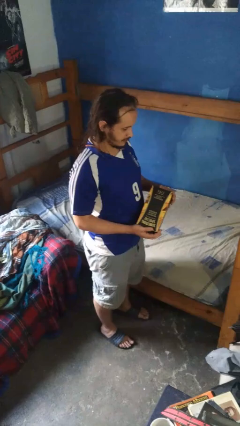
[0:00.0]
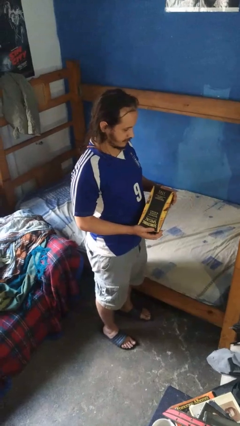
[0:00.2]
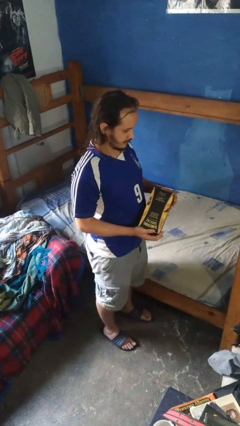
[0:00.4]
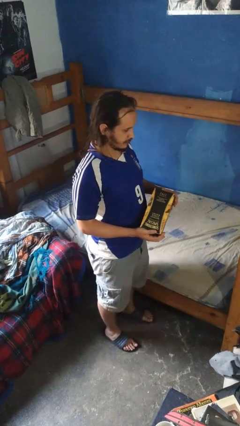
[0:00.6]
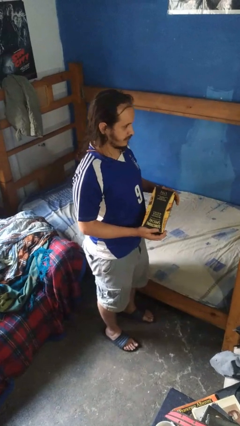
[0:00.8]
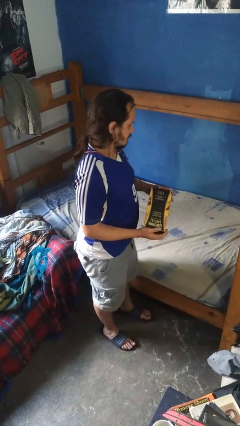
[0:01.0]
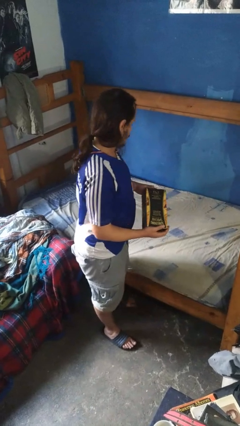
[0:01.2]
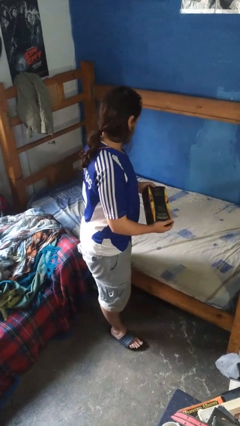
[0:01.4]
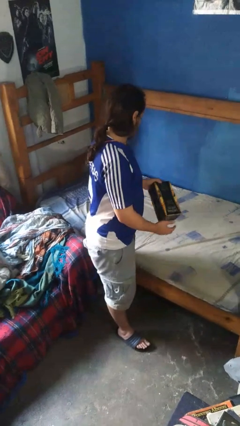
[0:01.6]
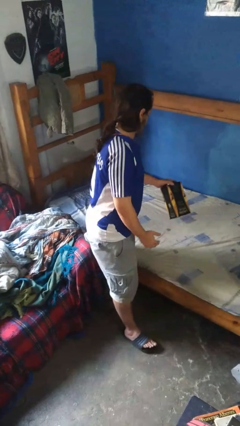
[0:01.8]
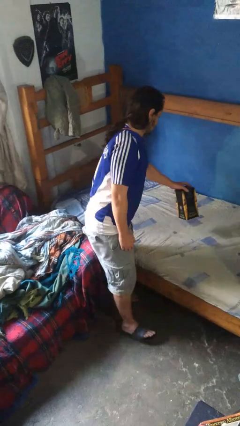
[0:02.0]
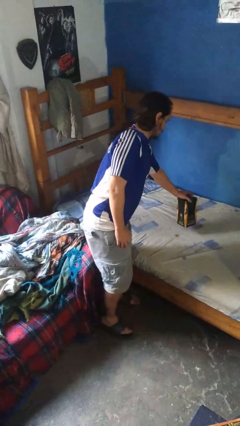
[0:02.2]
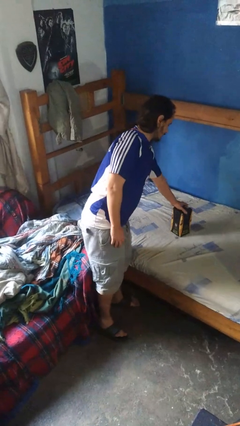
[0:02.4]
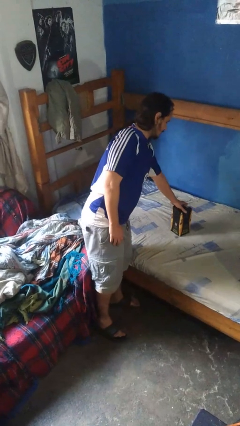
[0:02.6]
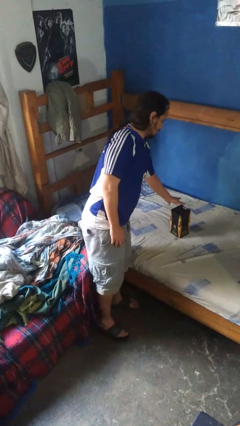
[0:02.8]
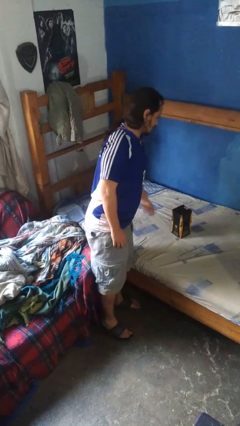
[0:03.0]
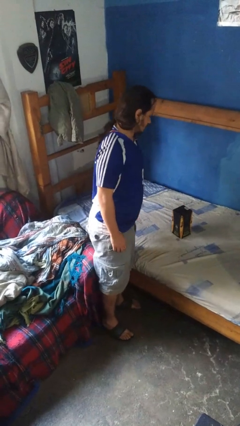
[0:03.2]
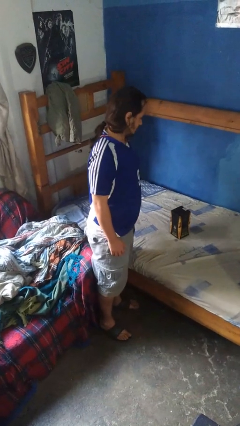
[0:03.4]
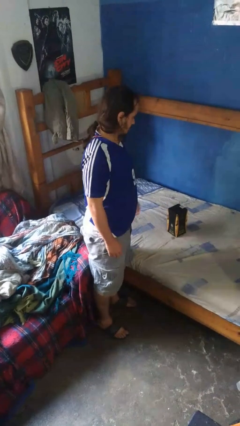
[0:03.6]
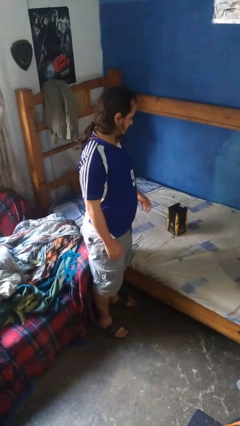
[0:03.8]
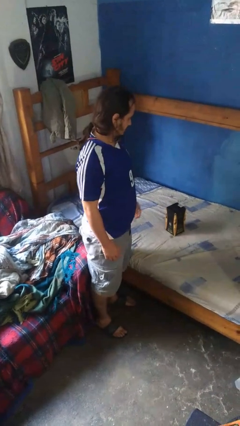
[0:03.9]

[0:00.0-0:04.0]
person puts down object on bed

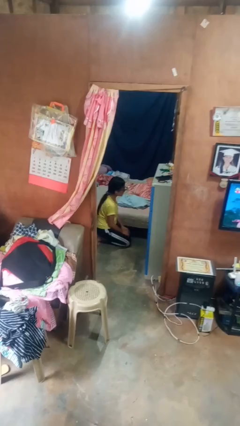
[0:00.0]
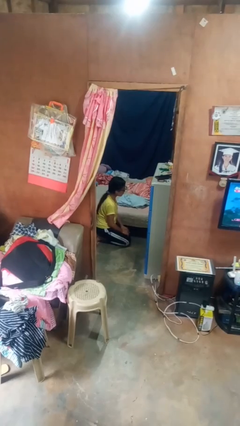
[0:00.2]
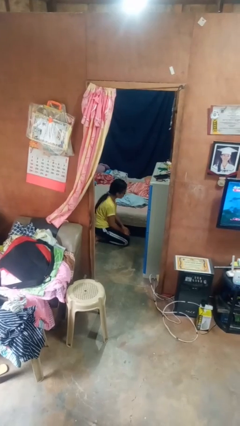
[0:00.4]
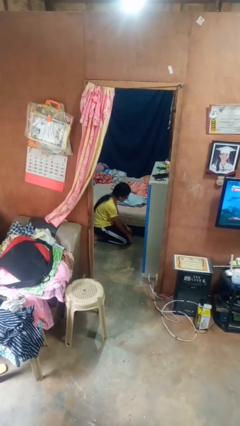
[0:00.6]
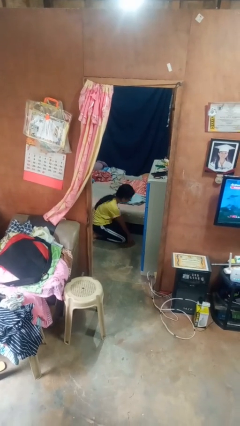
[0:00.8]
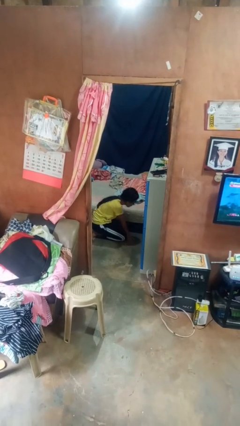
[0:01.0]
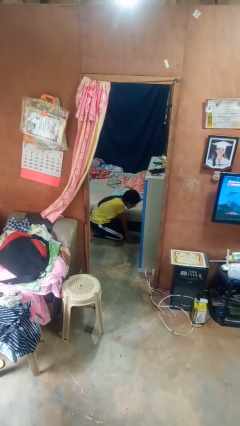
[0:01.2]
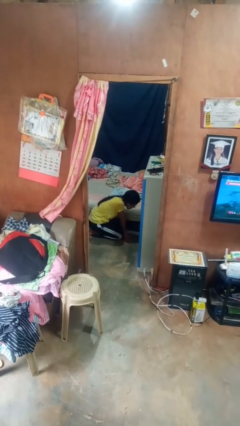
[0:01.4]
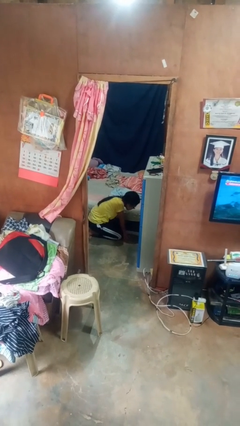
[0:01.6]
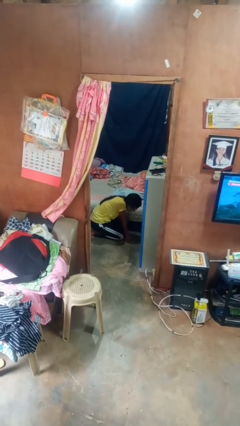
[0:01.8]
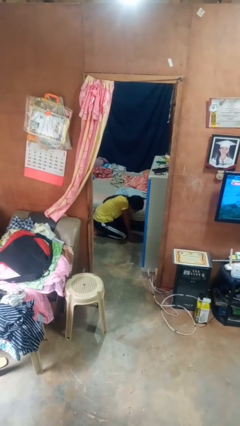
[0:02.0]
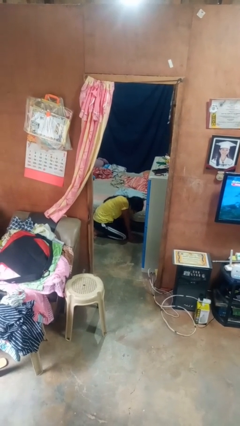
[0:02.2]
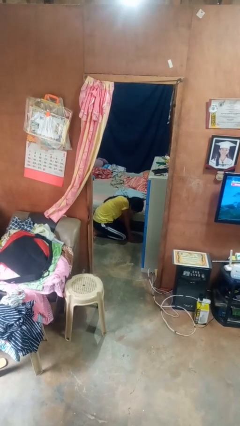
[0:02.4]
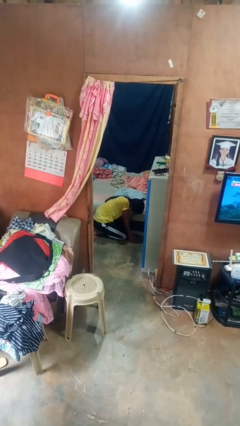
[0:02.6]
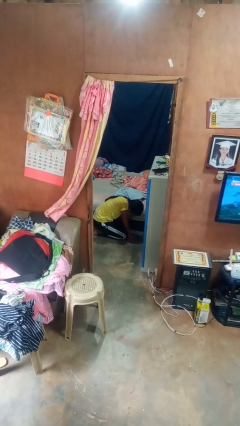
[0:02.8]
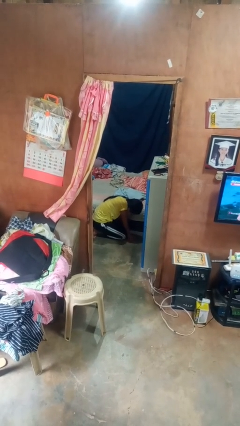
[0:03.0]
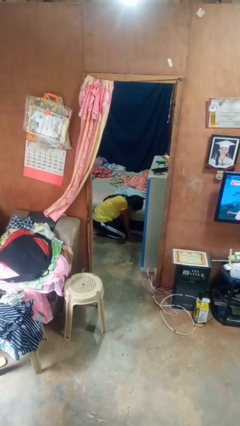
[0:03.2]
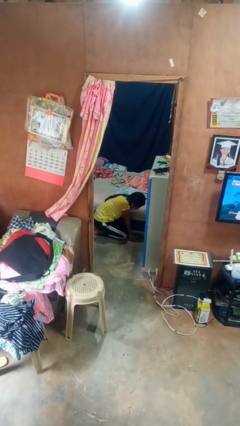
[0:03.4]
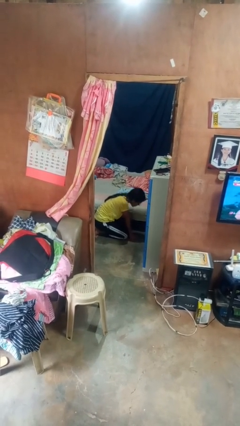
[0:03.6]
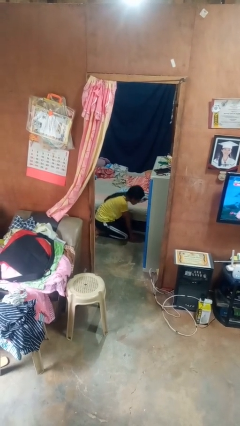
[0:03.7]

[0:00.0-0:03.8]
person searches under bed

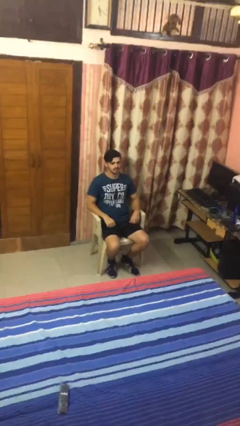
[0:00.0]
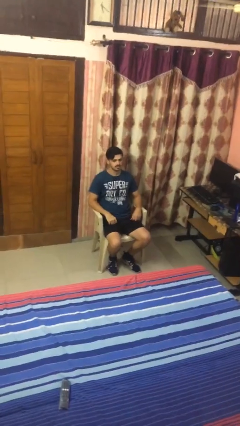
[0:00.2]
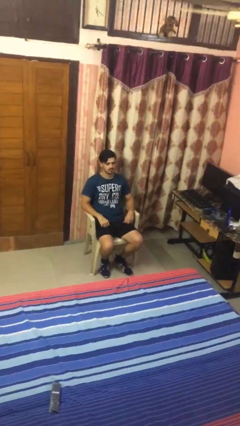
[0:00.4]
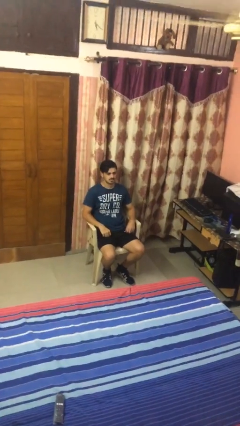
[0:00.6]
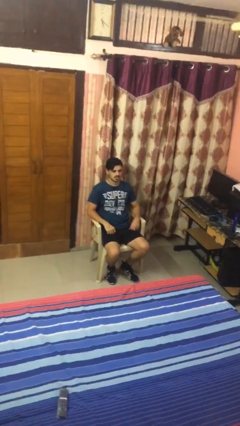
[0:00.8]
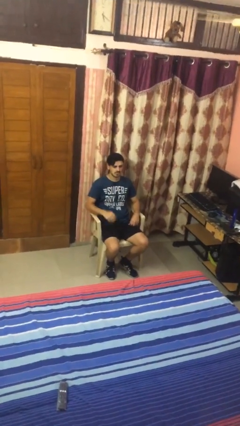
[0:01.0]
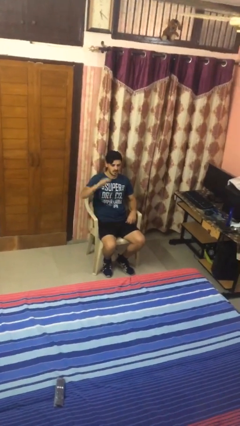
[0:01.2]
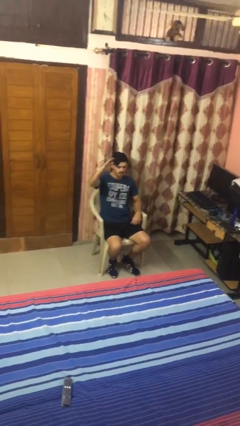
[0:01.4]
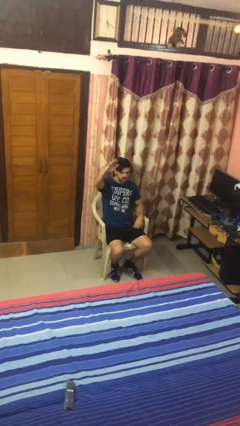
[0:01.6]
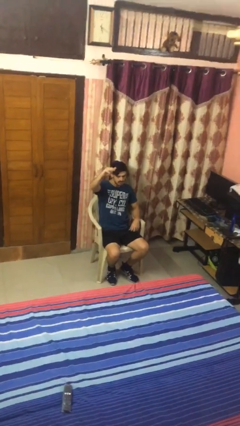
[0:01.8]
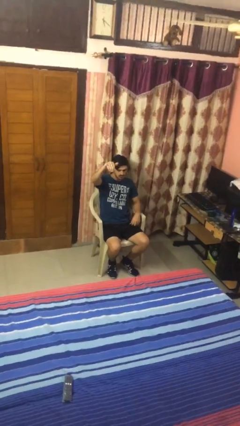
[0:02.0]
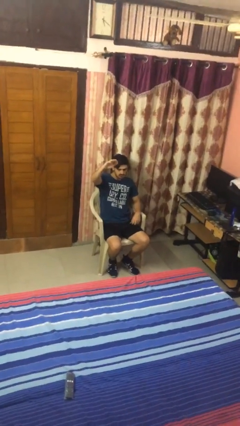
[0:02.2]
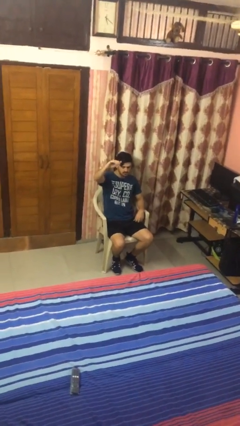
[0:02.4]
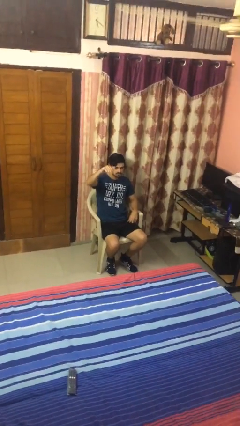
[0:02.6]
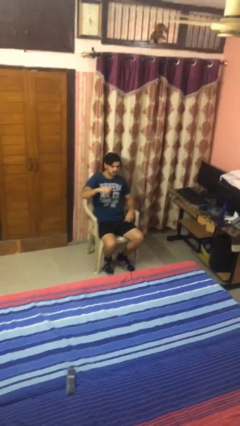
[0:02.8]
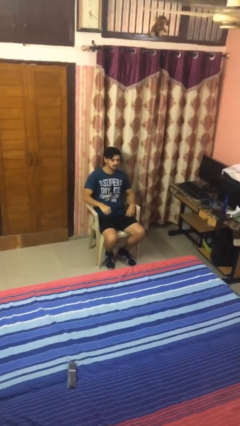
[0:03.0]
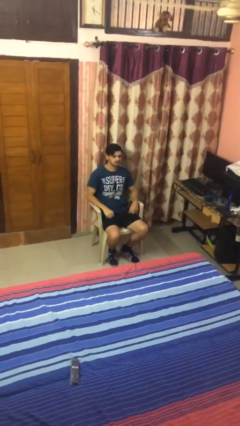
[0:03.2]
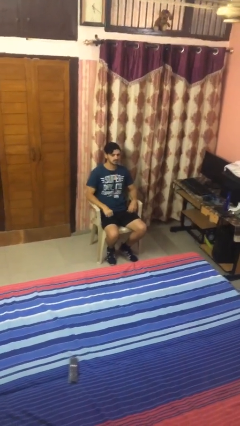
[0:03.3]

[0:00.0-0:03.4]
person gestures come here

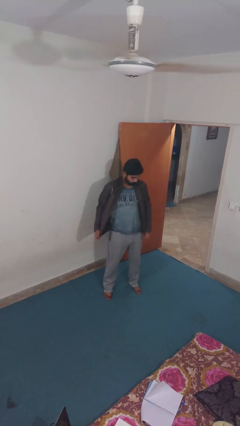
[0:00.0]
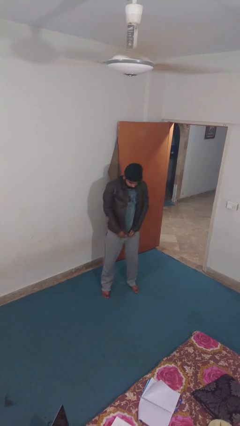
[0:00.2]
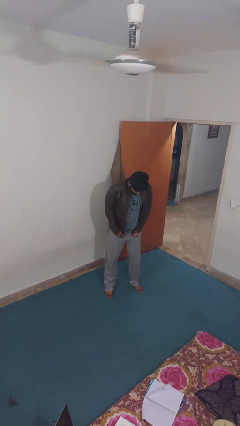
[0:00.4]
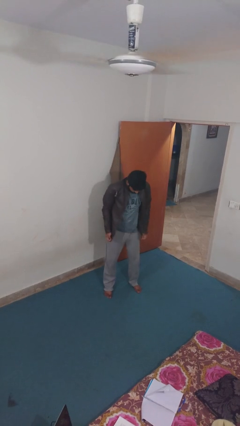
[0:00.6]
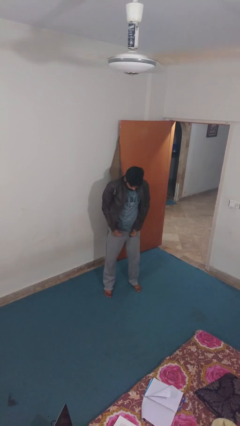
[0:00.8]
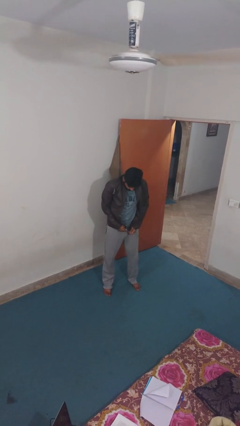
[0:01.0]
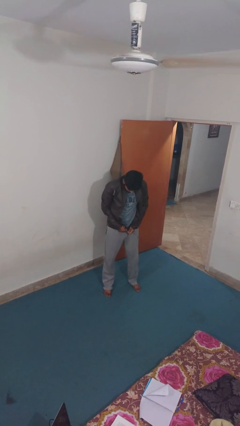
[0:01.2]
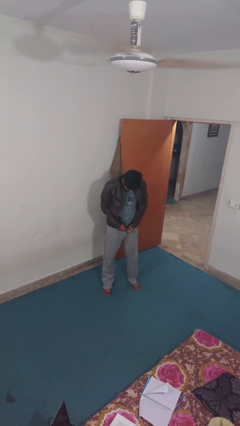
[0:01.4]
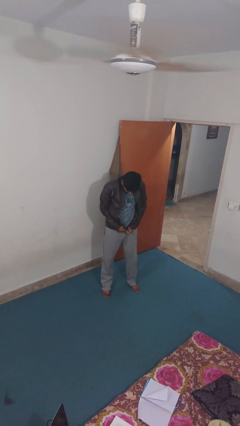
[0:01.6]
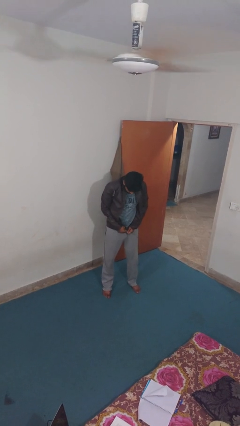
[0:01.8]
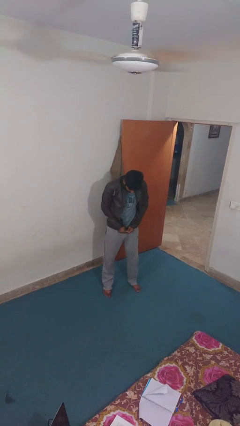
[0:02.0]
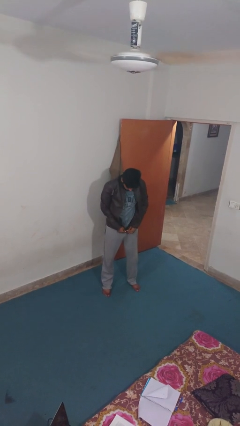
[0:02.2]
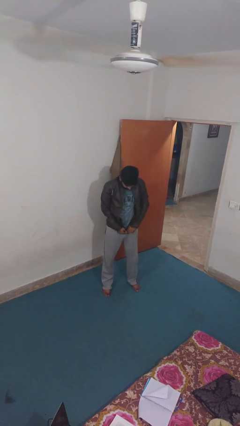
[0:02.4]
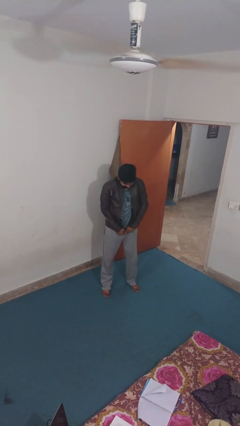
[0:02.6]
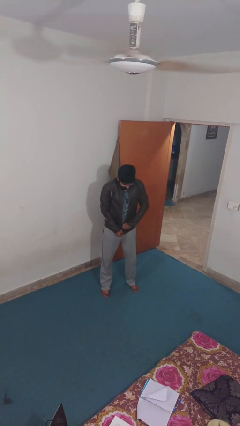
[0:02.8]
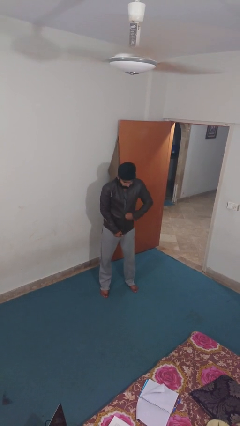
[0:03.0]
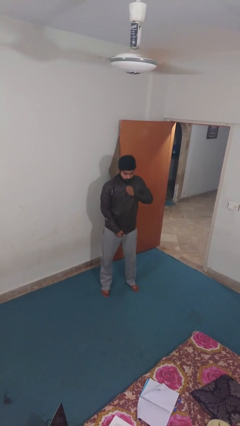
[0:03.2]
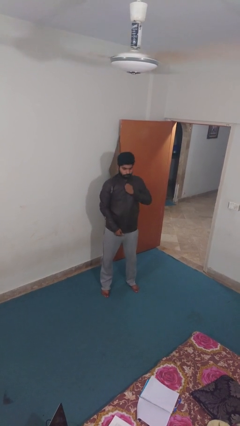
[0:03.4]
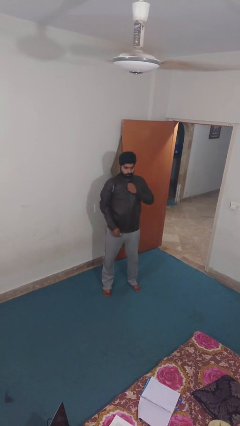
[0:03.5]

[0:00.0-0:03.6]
person zips up jacket

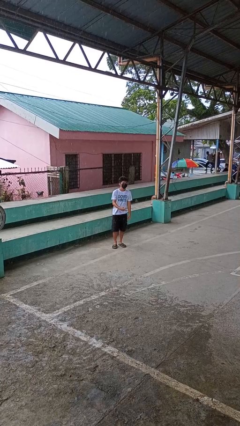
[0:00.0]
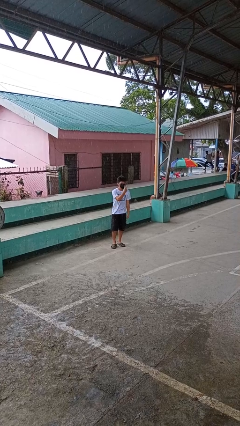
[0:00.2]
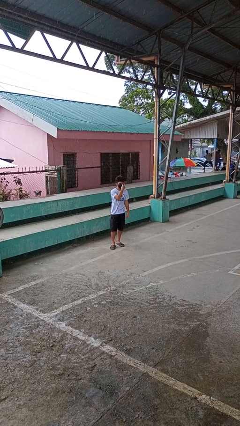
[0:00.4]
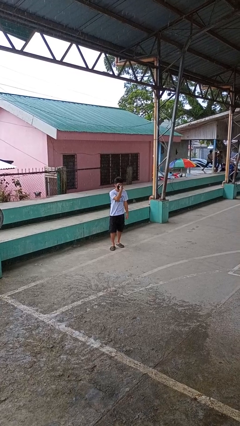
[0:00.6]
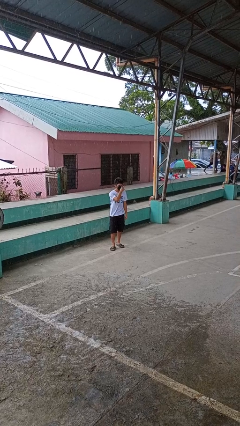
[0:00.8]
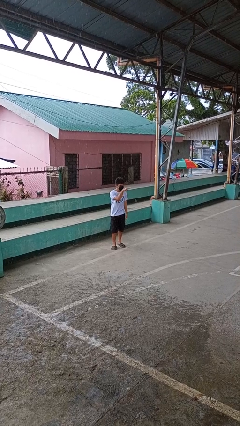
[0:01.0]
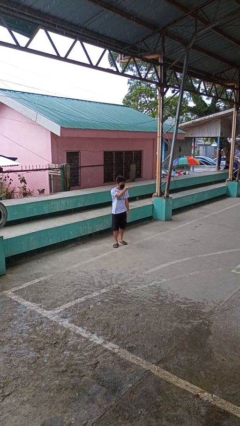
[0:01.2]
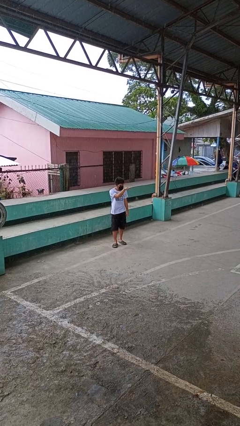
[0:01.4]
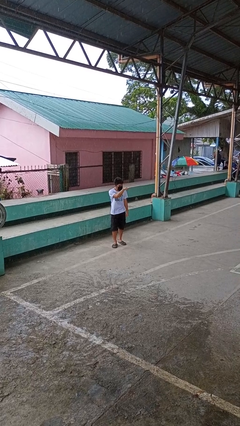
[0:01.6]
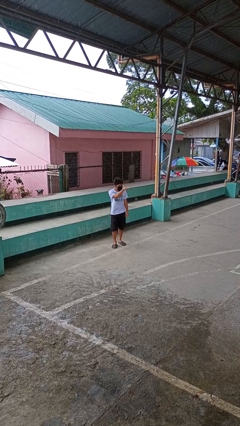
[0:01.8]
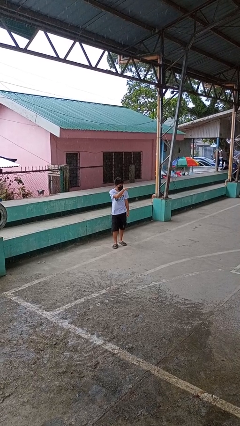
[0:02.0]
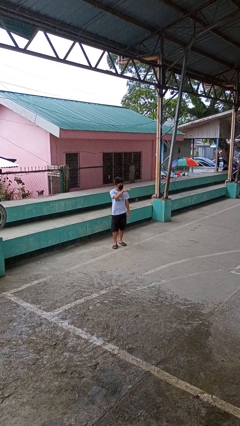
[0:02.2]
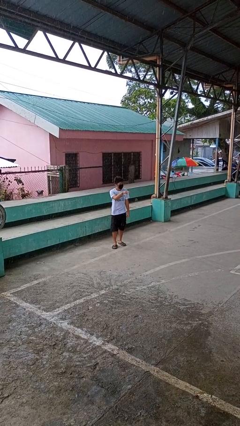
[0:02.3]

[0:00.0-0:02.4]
person gestures watch closely

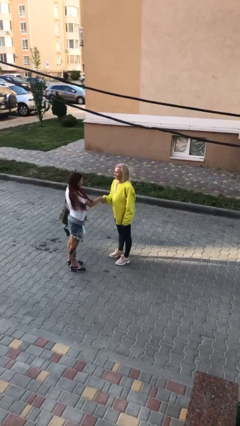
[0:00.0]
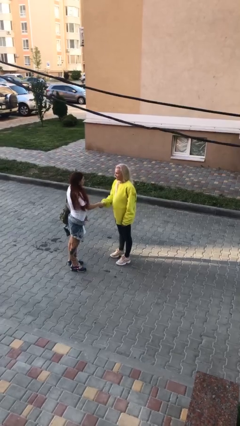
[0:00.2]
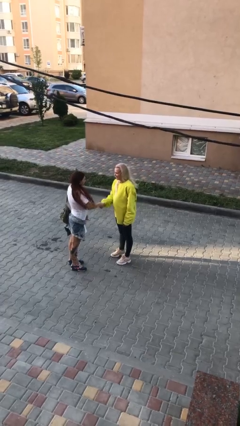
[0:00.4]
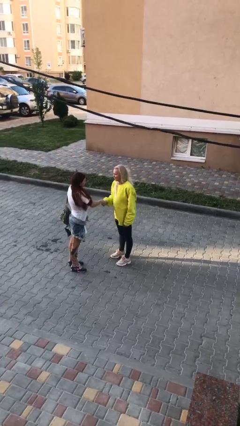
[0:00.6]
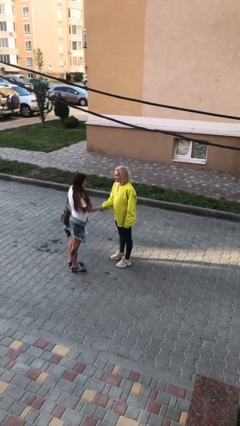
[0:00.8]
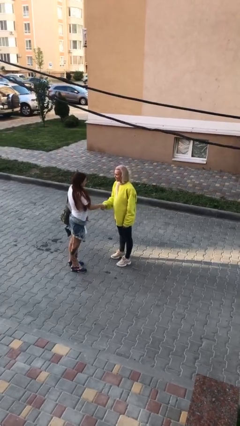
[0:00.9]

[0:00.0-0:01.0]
person shakes hand
